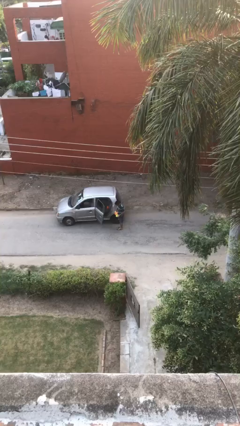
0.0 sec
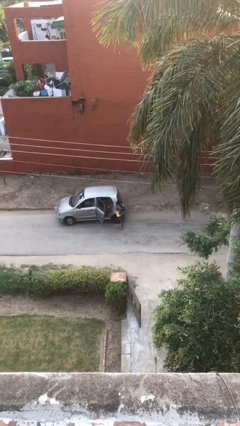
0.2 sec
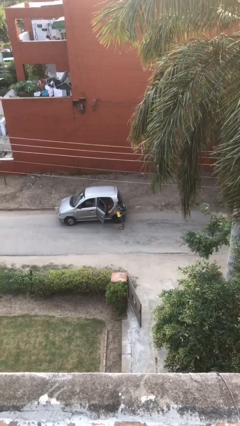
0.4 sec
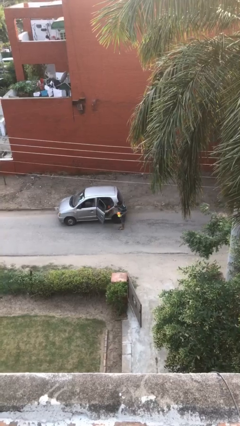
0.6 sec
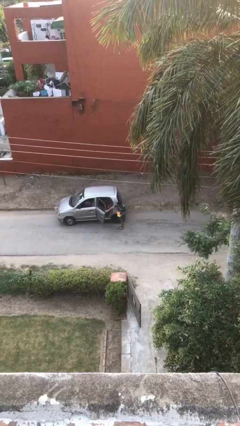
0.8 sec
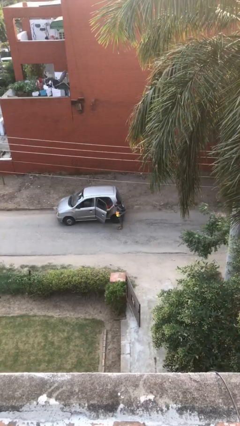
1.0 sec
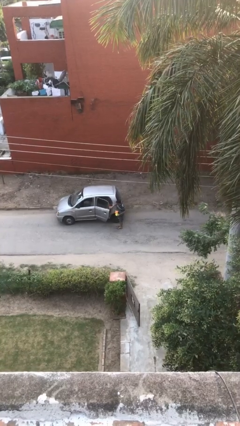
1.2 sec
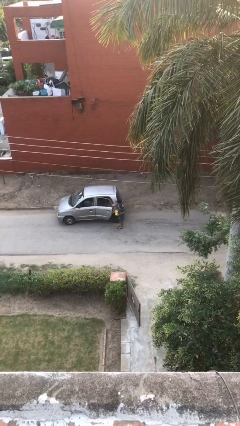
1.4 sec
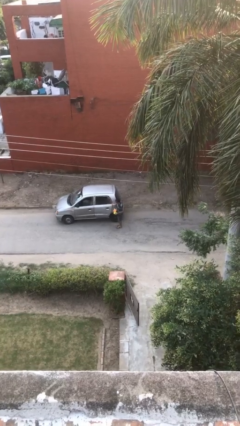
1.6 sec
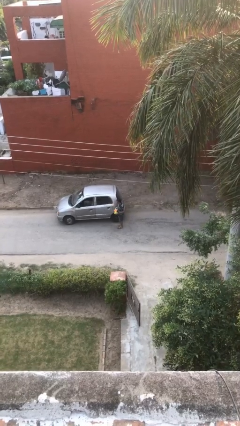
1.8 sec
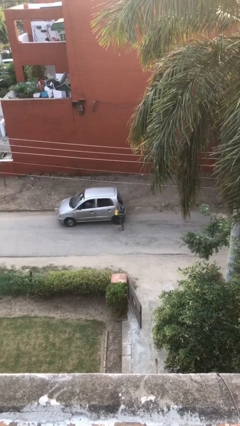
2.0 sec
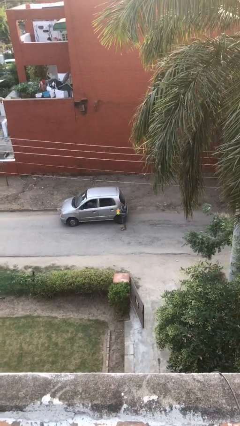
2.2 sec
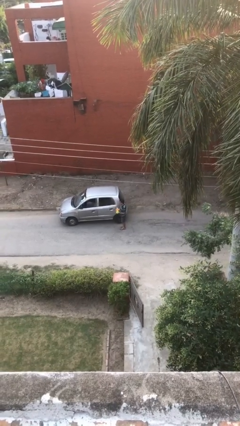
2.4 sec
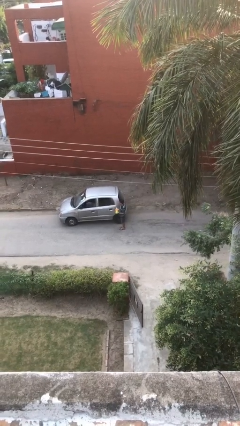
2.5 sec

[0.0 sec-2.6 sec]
person closes car door

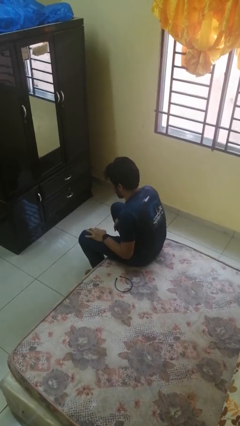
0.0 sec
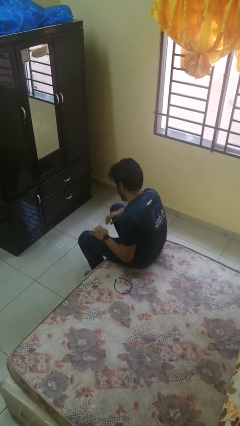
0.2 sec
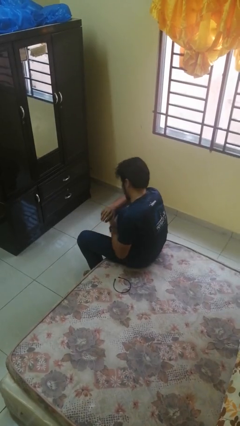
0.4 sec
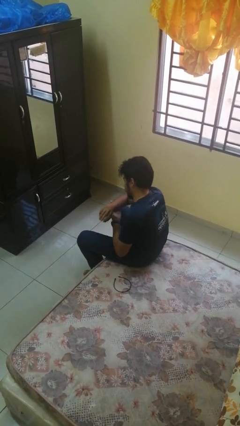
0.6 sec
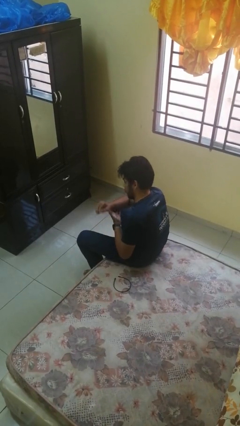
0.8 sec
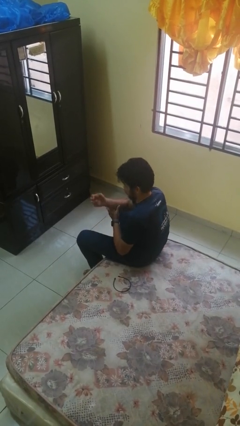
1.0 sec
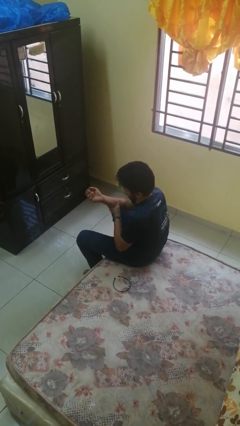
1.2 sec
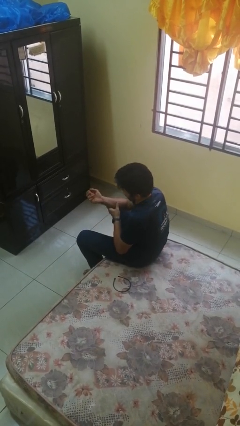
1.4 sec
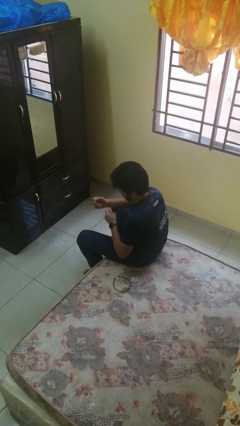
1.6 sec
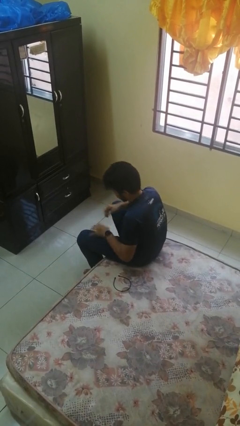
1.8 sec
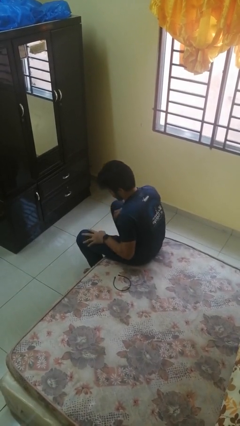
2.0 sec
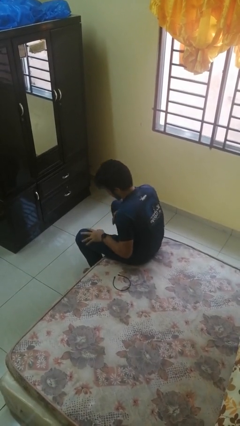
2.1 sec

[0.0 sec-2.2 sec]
person looks at hands in lap

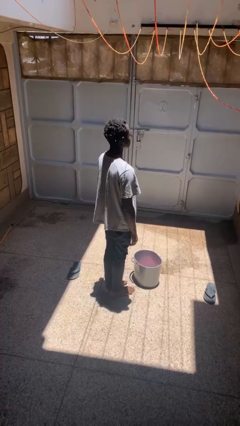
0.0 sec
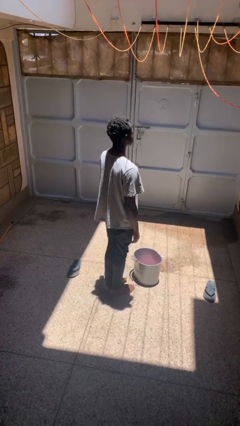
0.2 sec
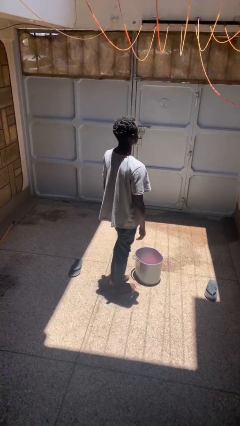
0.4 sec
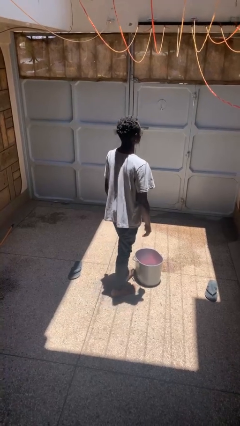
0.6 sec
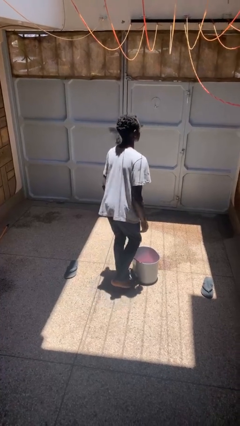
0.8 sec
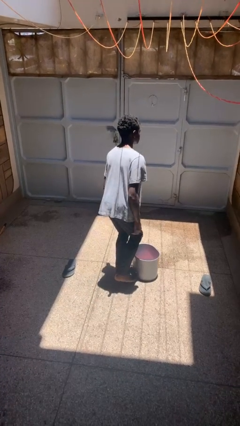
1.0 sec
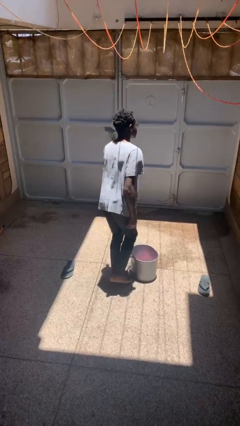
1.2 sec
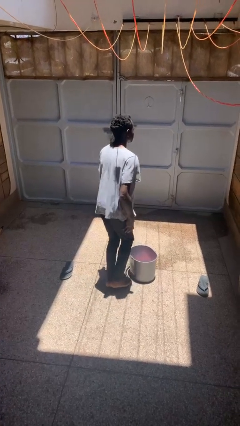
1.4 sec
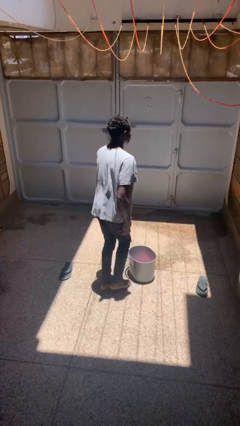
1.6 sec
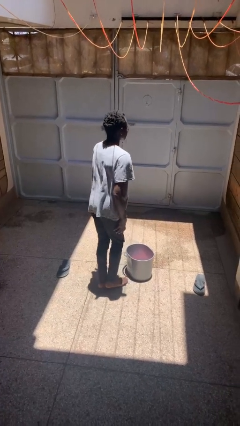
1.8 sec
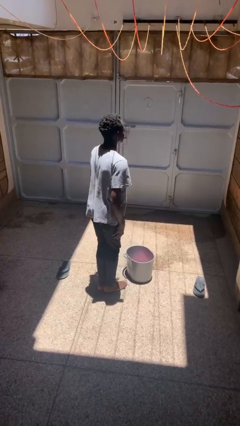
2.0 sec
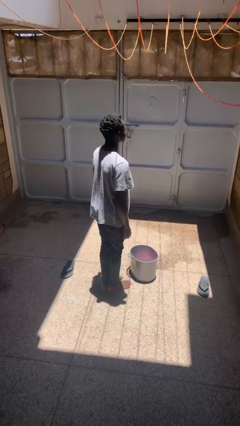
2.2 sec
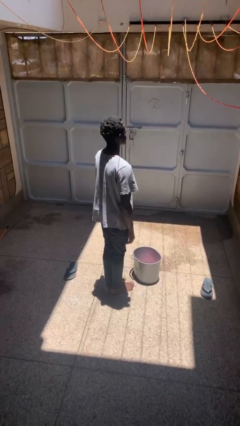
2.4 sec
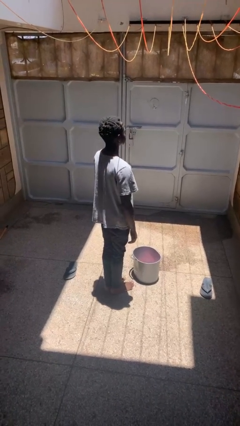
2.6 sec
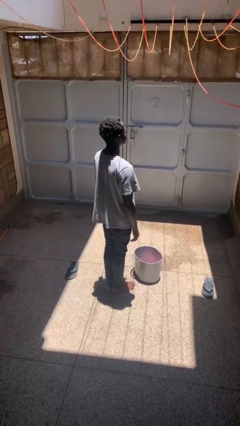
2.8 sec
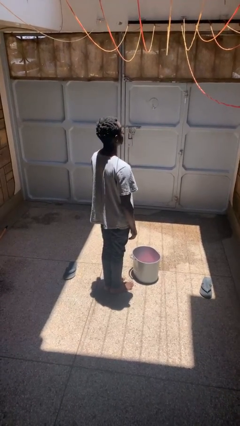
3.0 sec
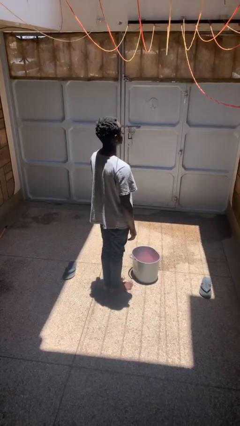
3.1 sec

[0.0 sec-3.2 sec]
person touches earlobe

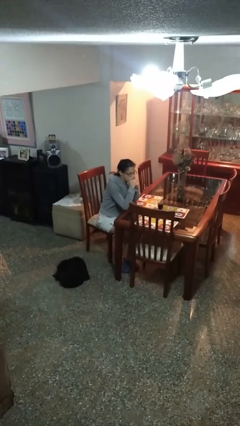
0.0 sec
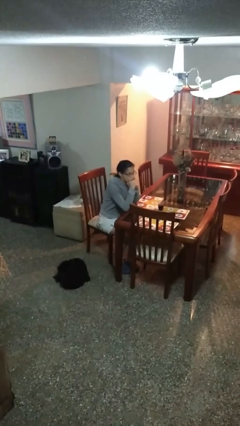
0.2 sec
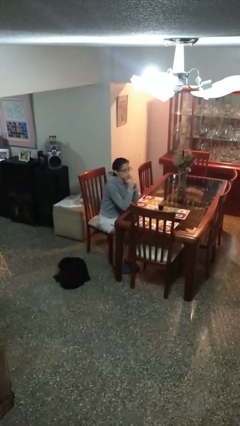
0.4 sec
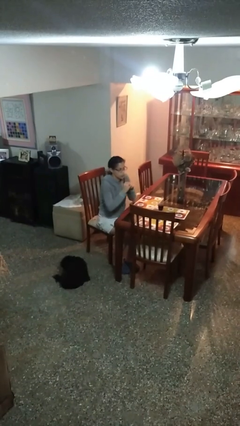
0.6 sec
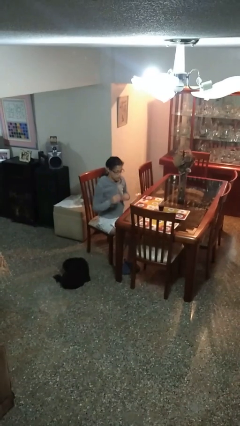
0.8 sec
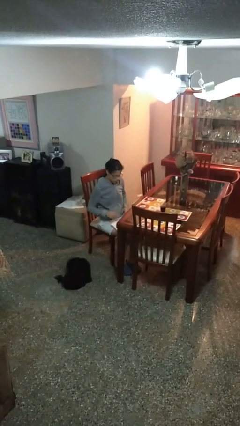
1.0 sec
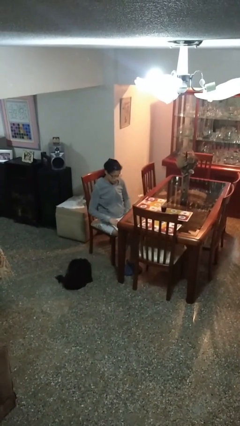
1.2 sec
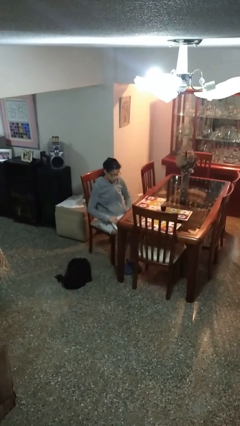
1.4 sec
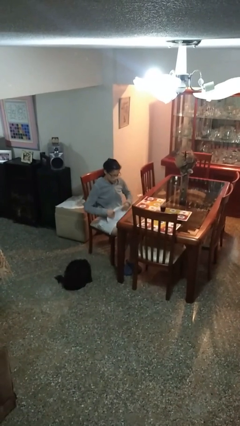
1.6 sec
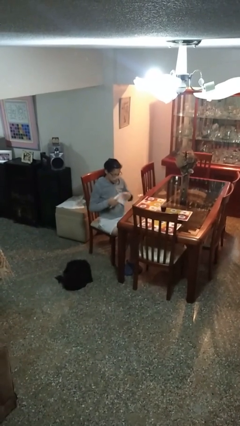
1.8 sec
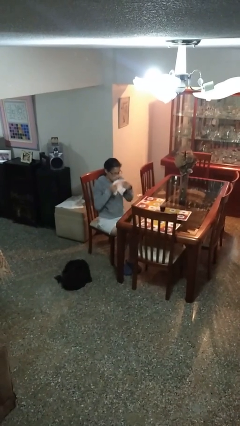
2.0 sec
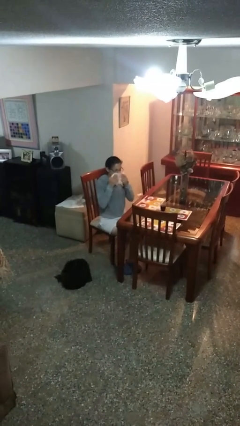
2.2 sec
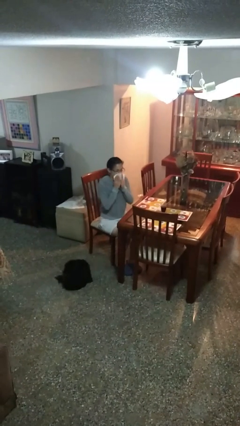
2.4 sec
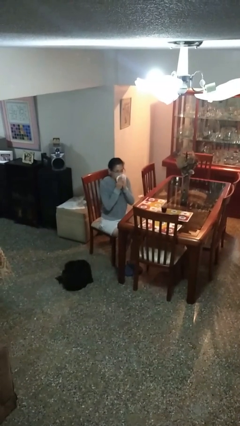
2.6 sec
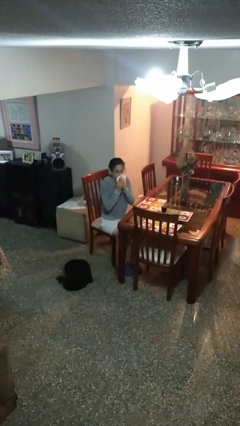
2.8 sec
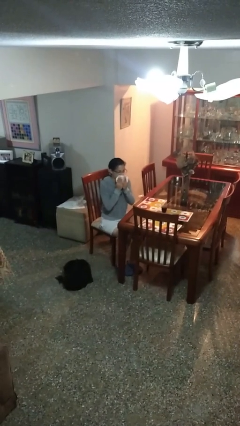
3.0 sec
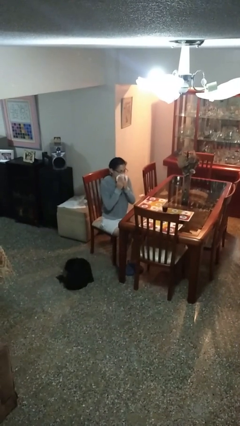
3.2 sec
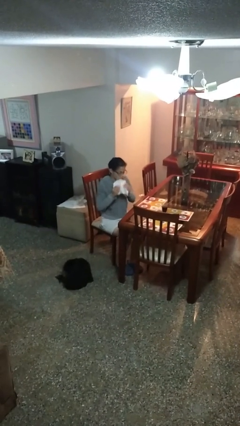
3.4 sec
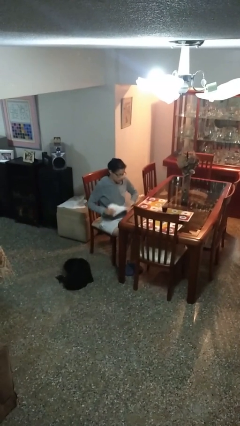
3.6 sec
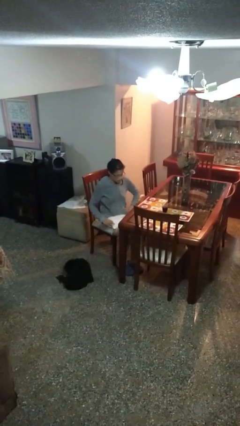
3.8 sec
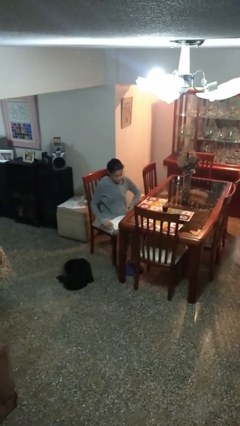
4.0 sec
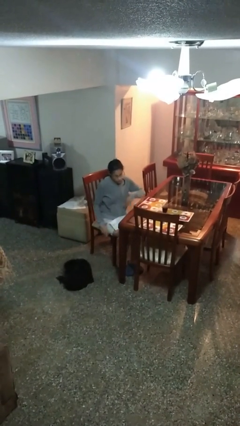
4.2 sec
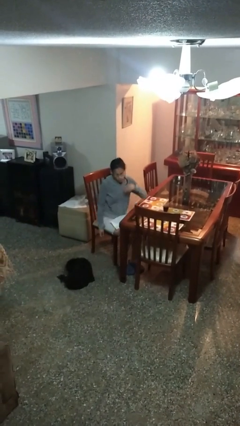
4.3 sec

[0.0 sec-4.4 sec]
person wipes mouth with napkin

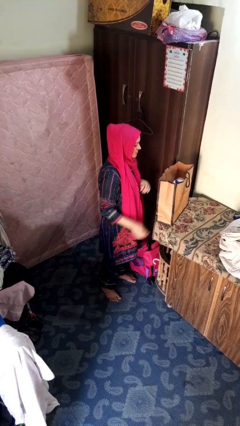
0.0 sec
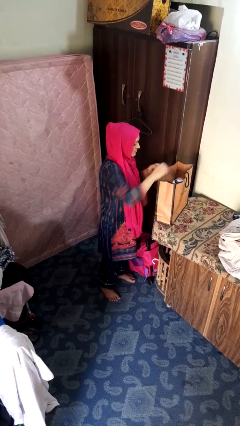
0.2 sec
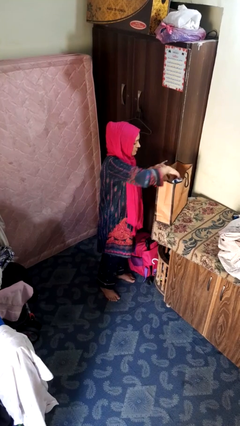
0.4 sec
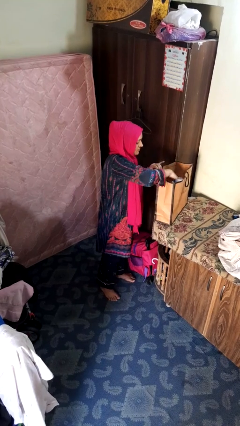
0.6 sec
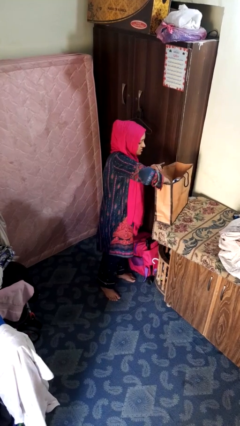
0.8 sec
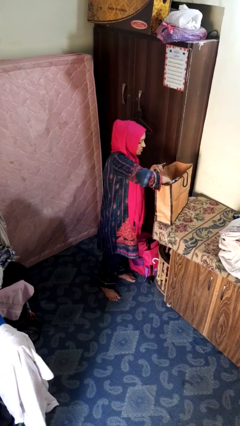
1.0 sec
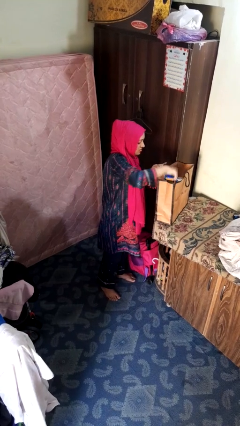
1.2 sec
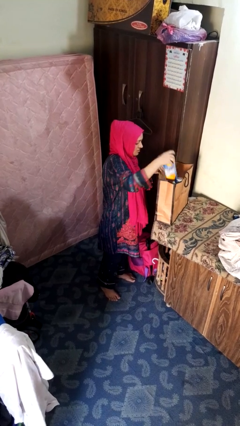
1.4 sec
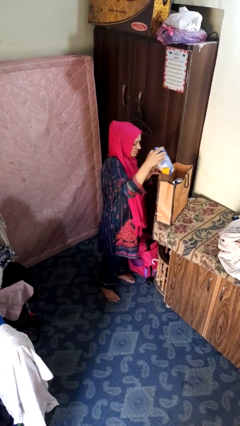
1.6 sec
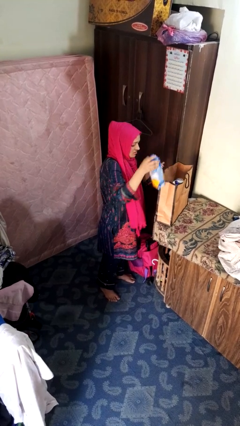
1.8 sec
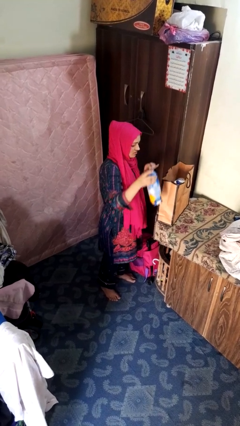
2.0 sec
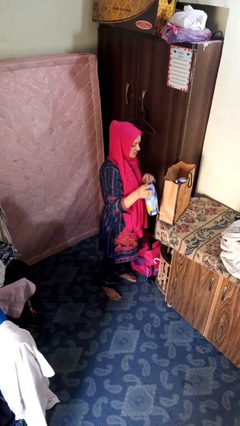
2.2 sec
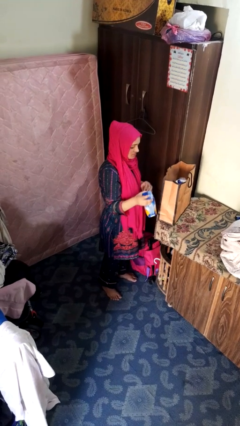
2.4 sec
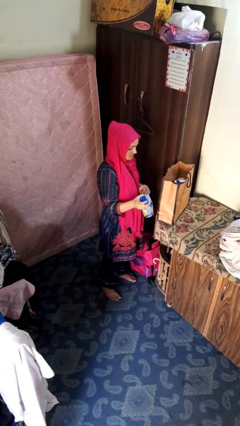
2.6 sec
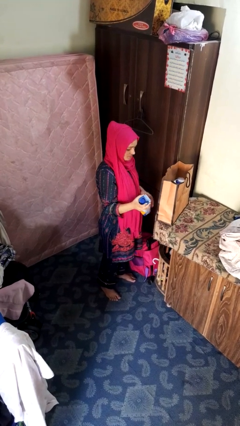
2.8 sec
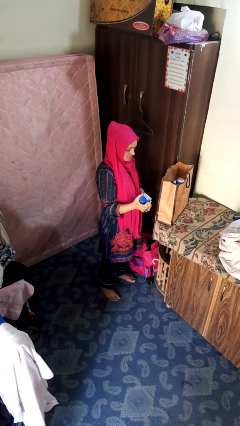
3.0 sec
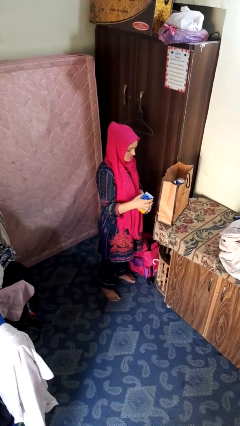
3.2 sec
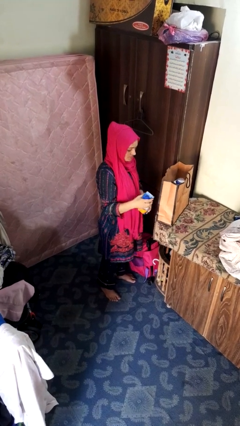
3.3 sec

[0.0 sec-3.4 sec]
person takes object from bag

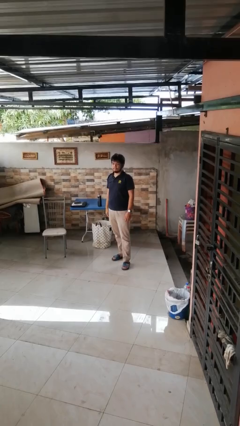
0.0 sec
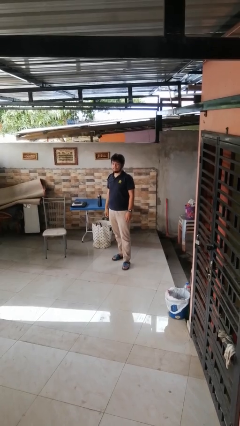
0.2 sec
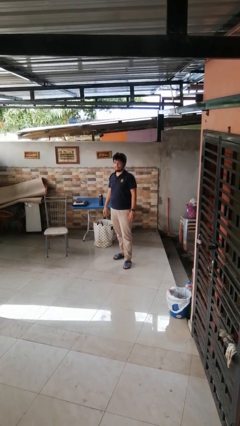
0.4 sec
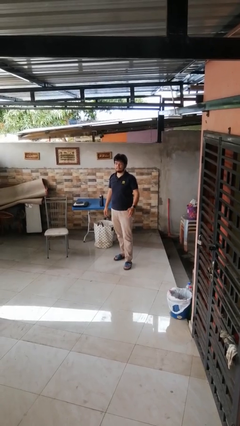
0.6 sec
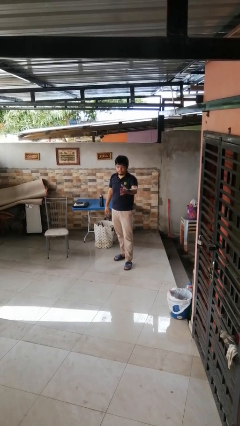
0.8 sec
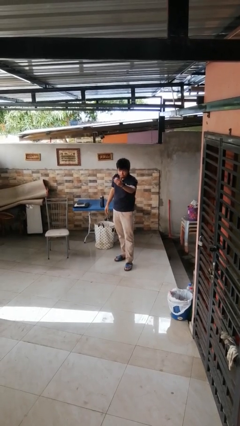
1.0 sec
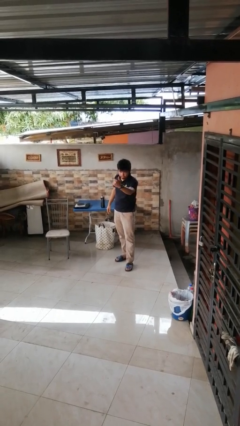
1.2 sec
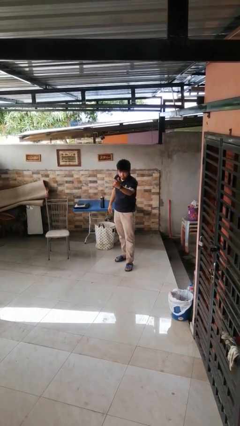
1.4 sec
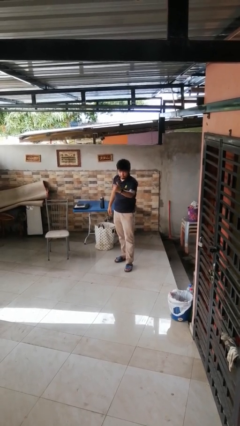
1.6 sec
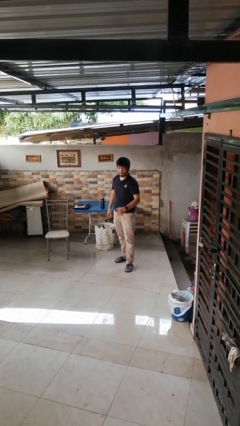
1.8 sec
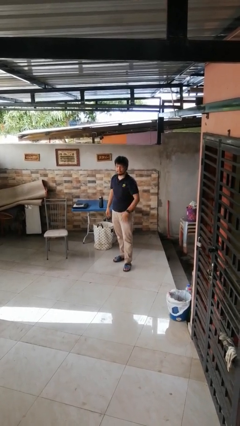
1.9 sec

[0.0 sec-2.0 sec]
person gestures come here
